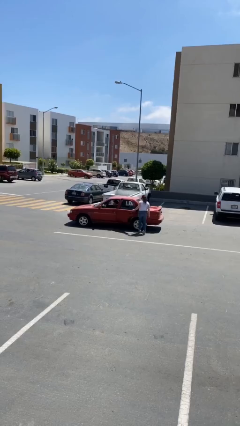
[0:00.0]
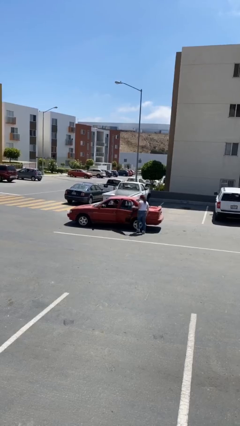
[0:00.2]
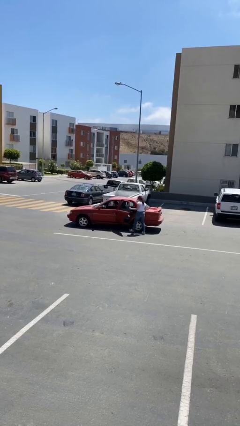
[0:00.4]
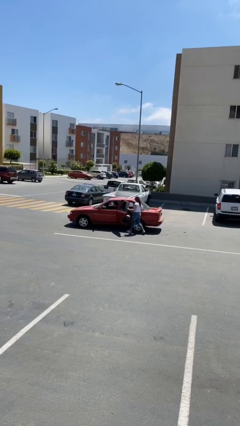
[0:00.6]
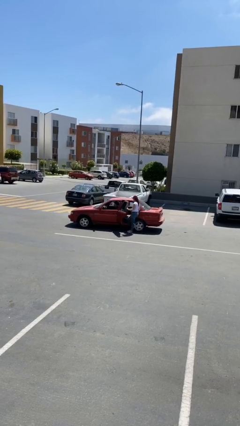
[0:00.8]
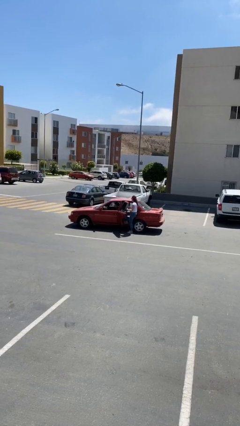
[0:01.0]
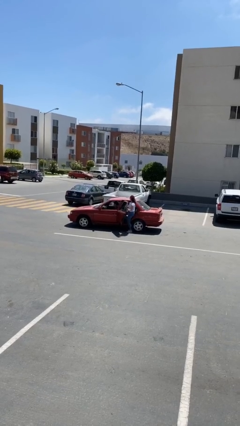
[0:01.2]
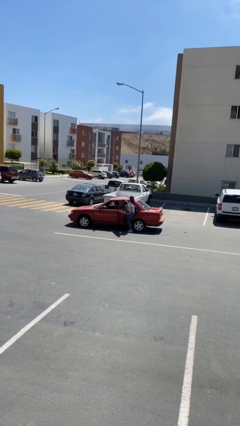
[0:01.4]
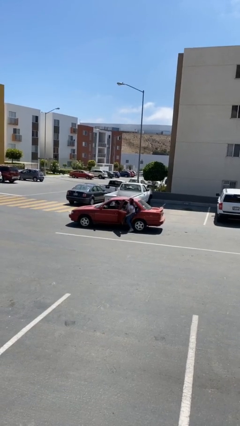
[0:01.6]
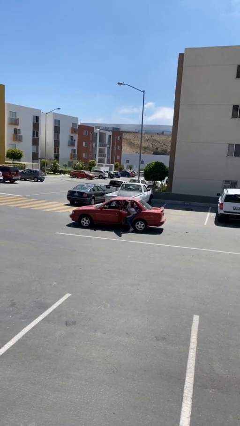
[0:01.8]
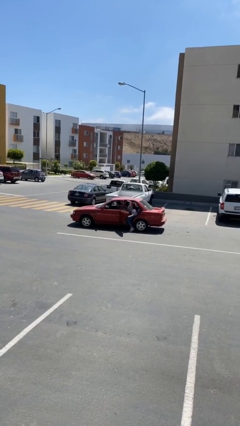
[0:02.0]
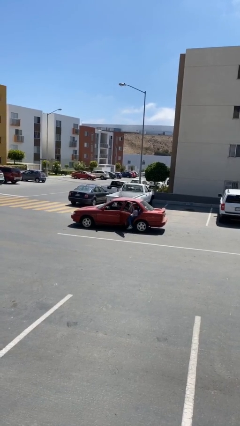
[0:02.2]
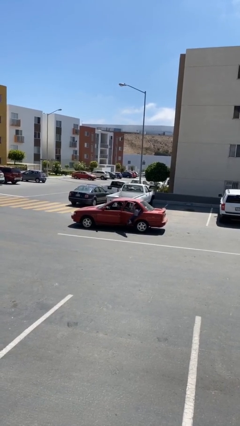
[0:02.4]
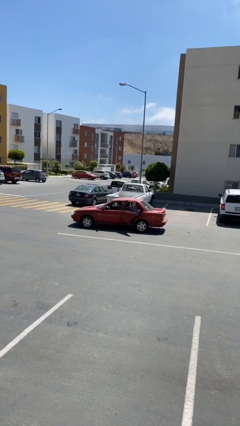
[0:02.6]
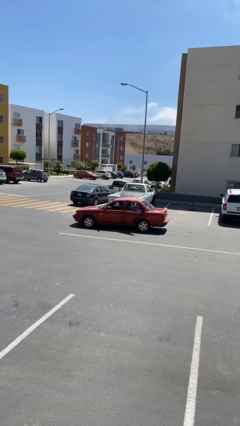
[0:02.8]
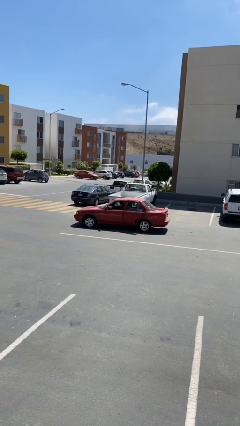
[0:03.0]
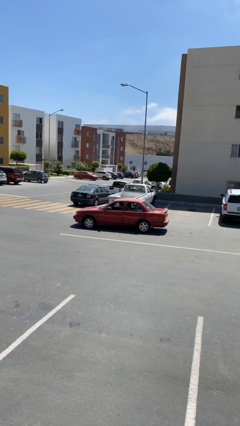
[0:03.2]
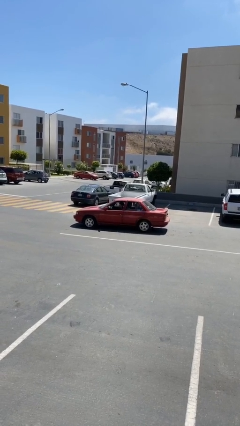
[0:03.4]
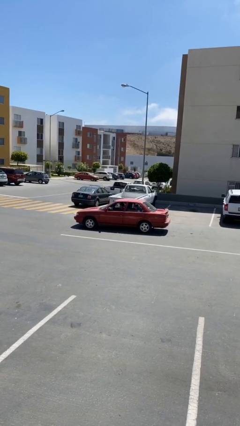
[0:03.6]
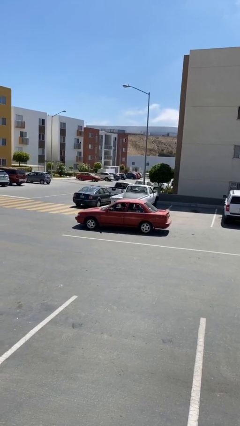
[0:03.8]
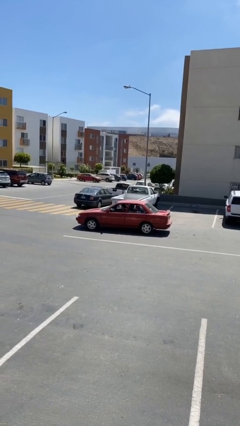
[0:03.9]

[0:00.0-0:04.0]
car picks up person

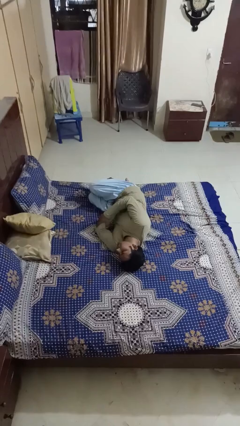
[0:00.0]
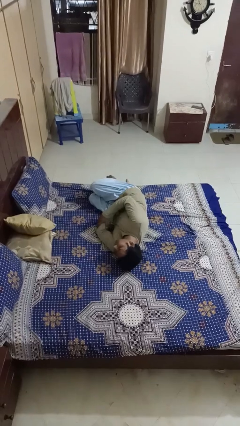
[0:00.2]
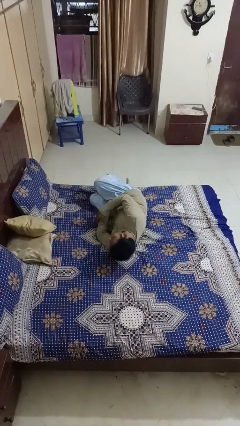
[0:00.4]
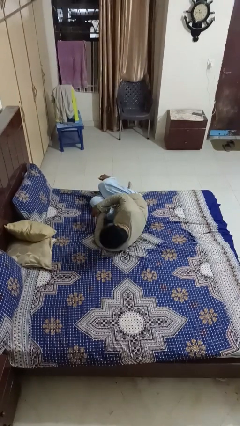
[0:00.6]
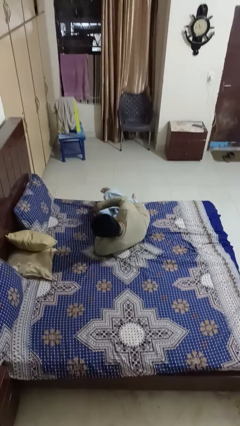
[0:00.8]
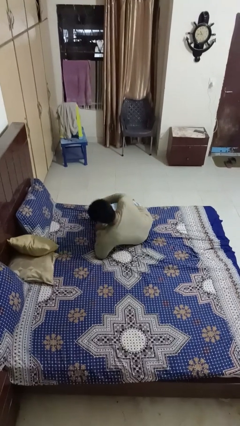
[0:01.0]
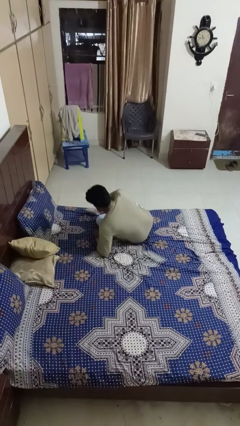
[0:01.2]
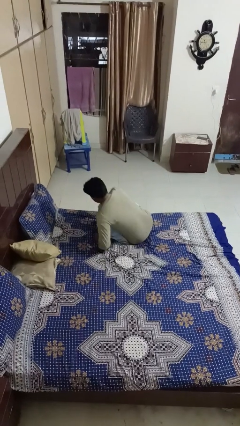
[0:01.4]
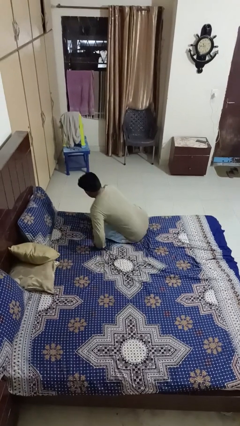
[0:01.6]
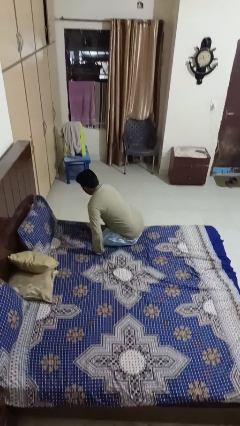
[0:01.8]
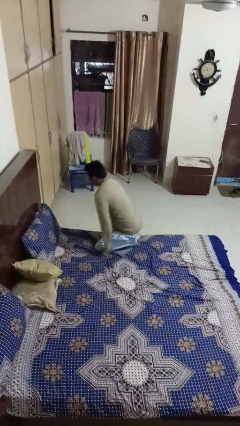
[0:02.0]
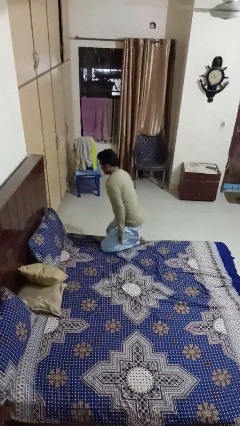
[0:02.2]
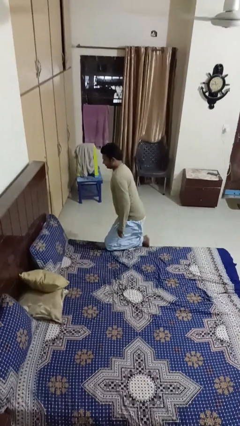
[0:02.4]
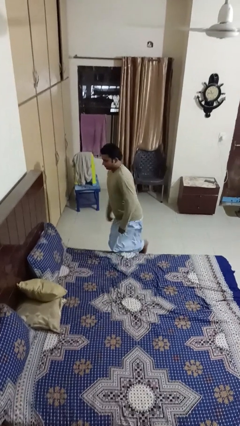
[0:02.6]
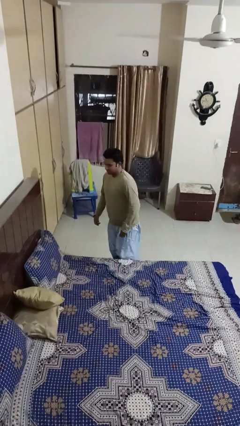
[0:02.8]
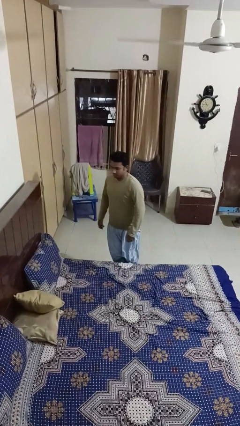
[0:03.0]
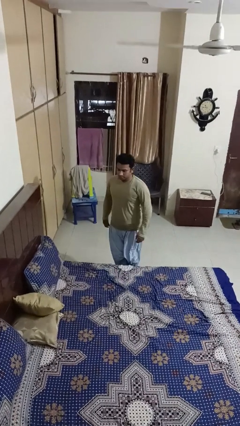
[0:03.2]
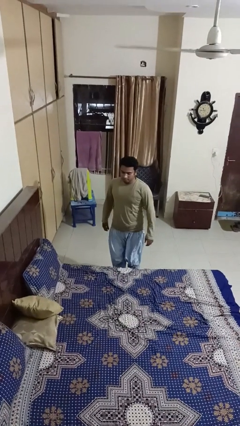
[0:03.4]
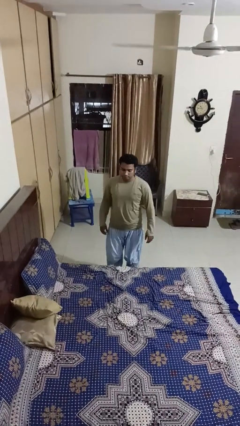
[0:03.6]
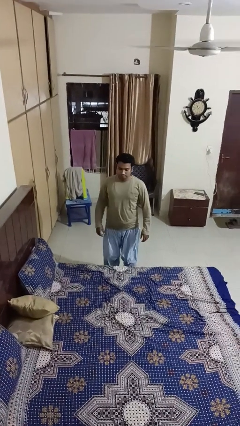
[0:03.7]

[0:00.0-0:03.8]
person stands up

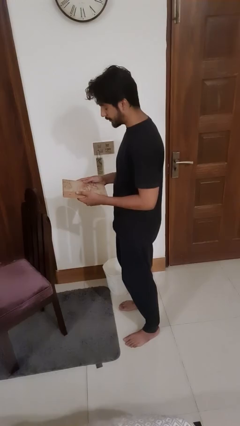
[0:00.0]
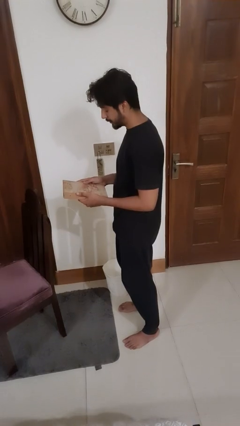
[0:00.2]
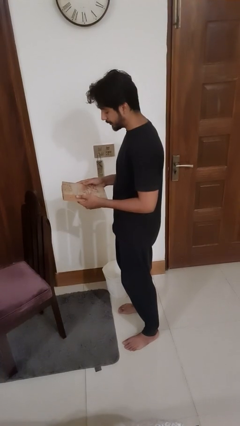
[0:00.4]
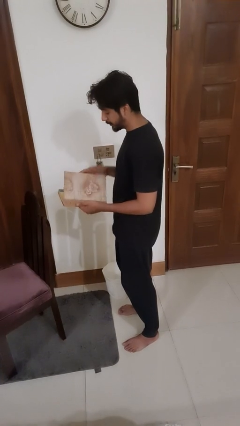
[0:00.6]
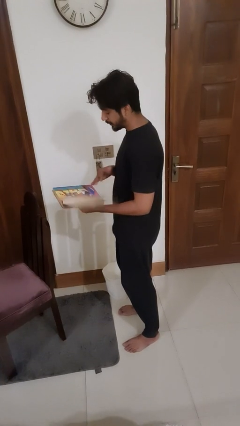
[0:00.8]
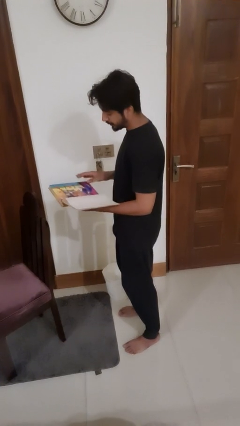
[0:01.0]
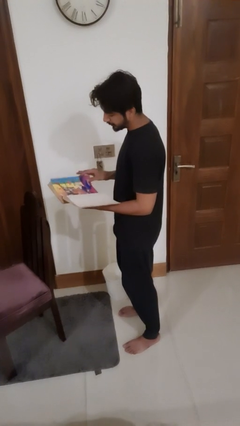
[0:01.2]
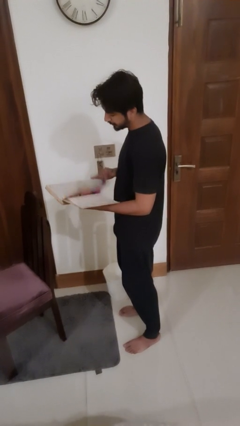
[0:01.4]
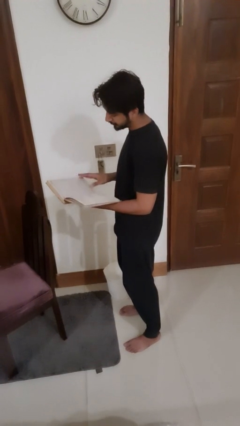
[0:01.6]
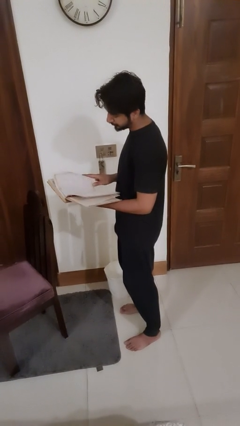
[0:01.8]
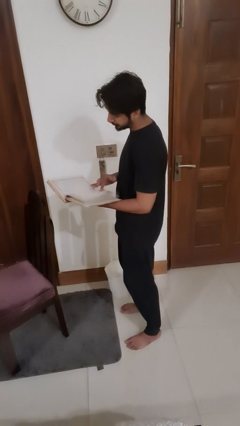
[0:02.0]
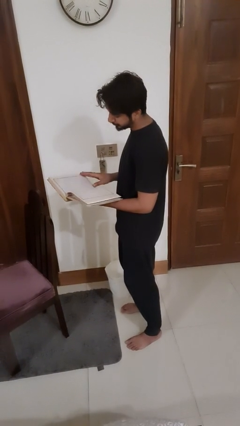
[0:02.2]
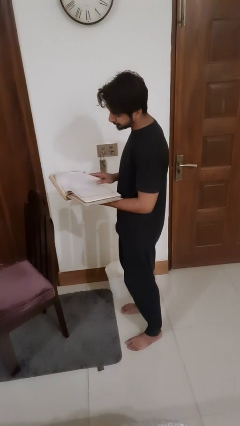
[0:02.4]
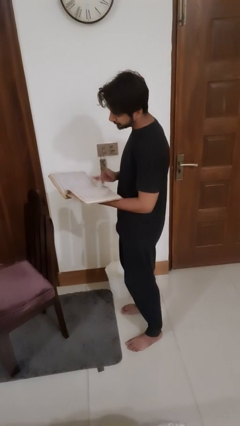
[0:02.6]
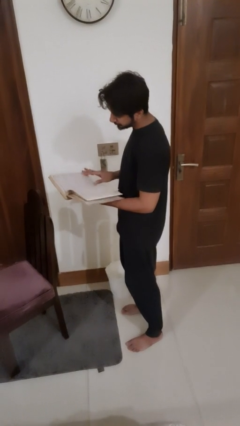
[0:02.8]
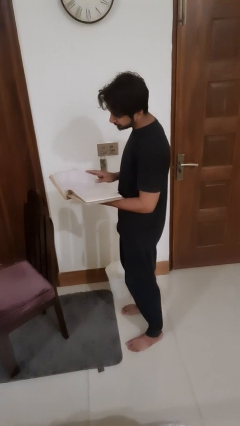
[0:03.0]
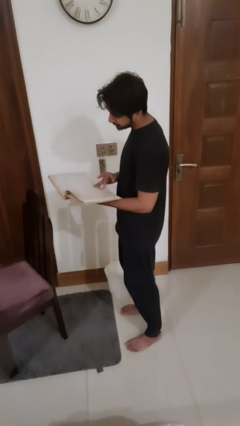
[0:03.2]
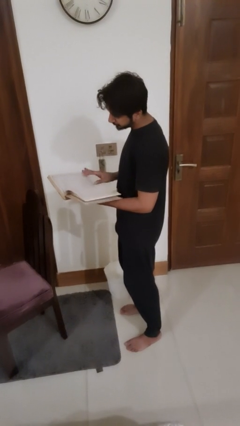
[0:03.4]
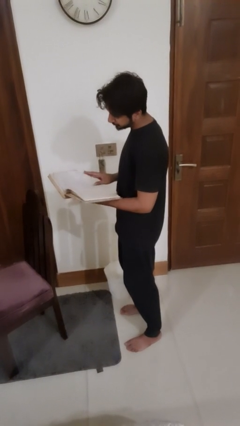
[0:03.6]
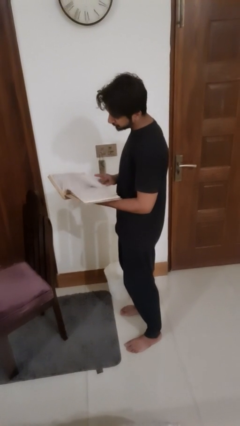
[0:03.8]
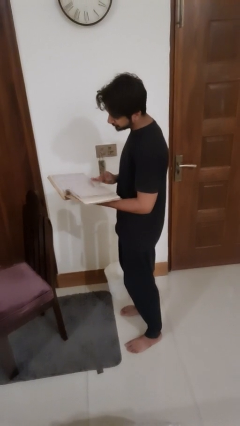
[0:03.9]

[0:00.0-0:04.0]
person reads book

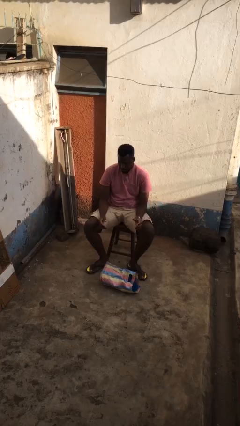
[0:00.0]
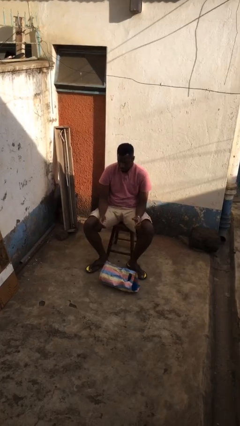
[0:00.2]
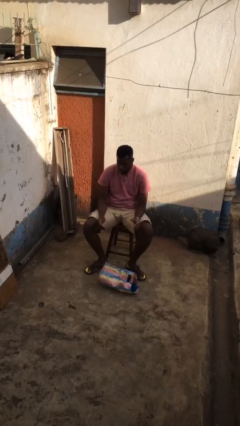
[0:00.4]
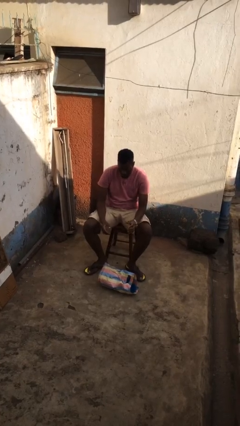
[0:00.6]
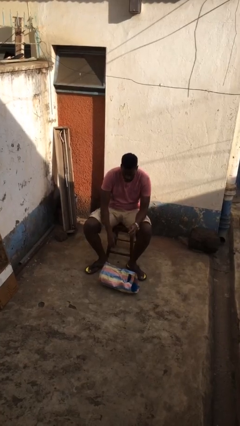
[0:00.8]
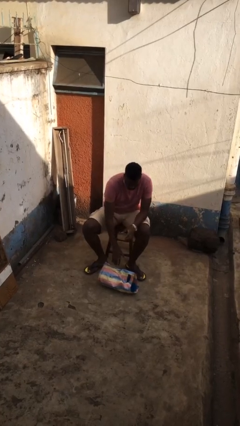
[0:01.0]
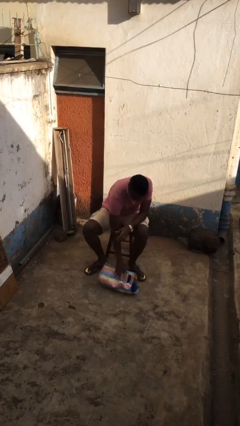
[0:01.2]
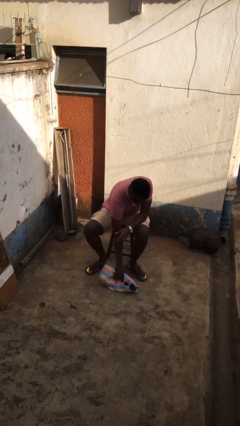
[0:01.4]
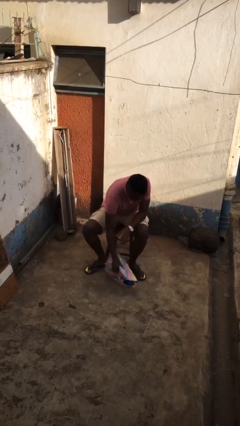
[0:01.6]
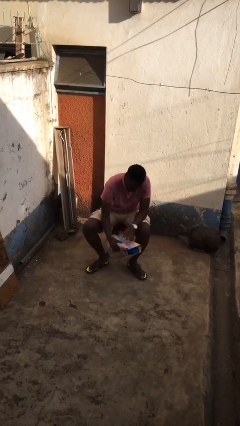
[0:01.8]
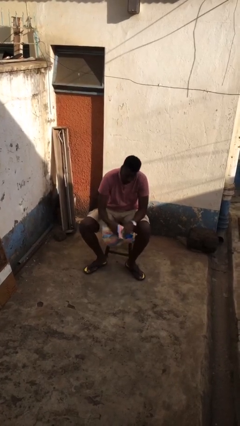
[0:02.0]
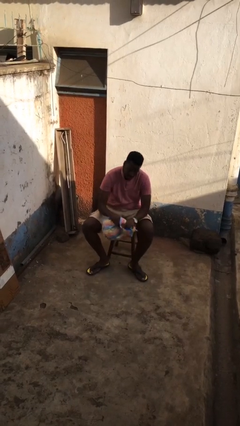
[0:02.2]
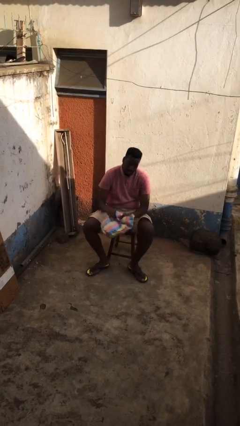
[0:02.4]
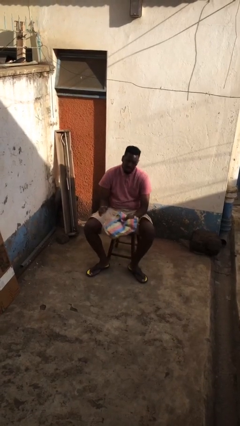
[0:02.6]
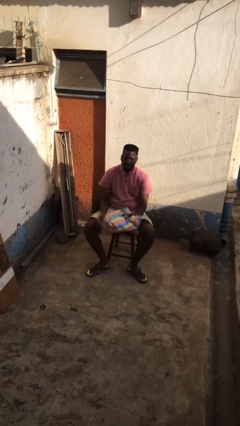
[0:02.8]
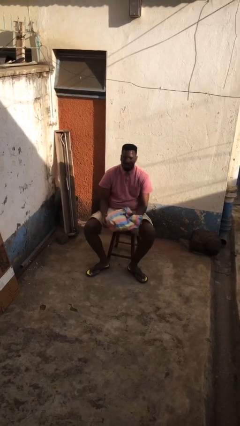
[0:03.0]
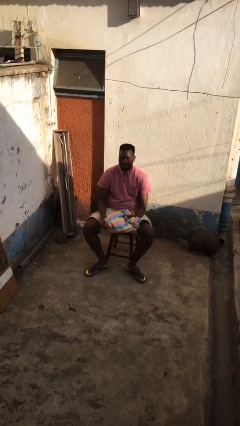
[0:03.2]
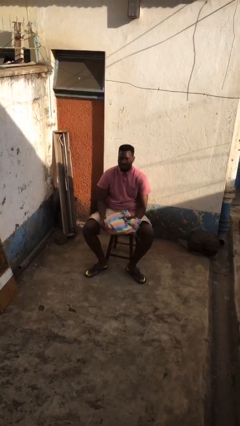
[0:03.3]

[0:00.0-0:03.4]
person picks up object from floor

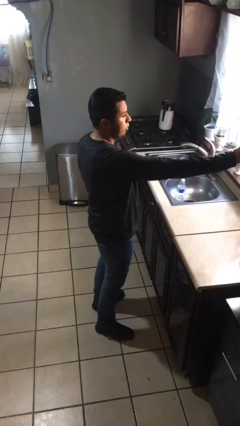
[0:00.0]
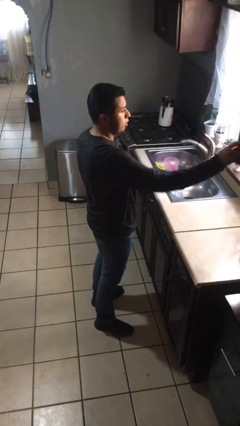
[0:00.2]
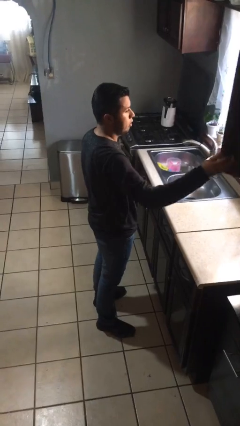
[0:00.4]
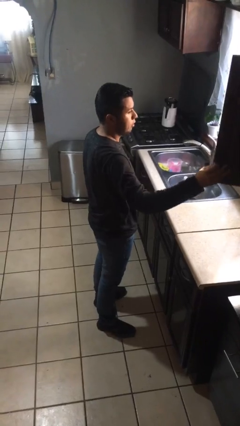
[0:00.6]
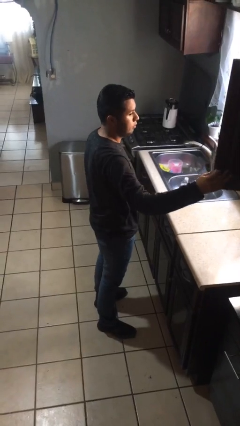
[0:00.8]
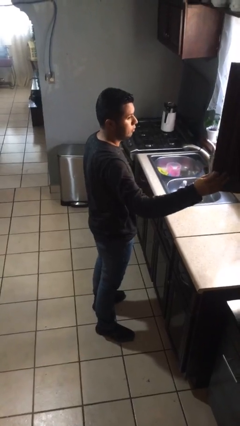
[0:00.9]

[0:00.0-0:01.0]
person opens cabinet

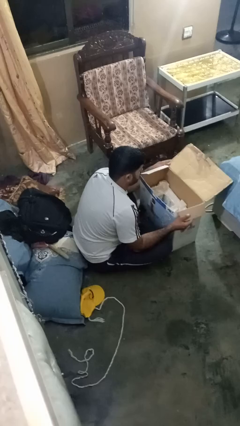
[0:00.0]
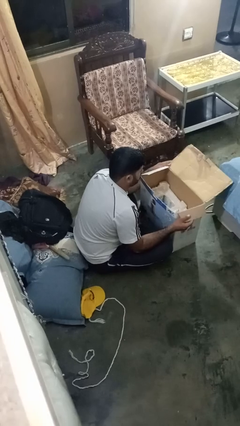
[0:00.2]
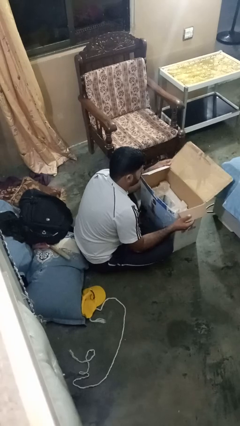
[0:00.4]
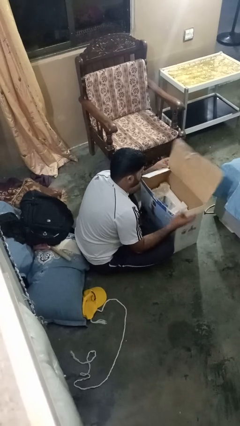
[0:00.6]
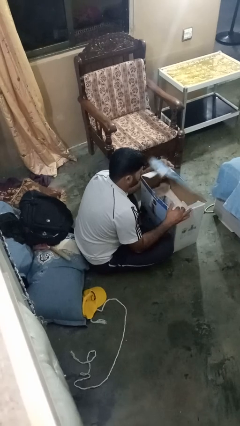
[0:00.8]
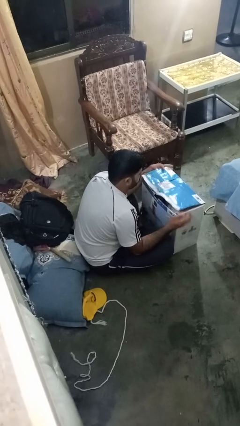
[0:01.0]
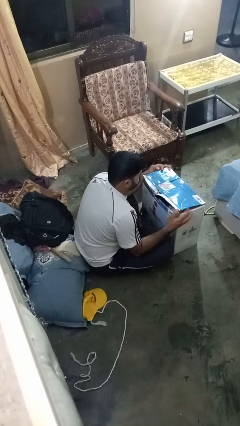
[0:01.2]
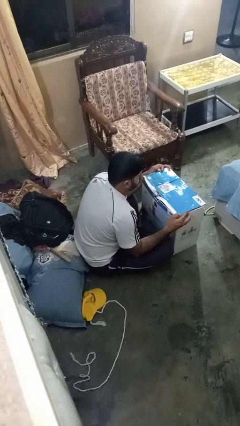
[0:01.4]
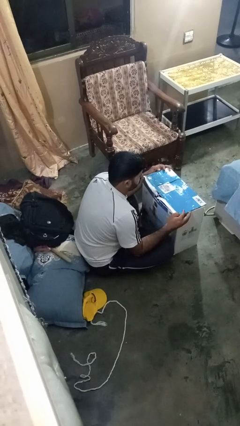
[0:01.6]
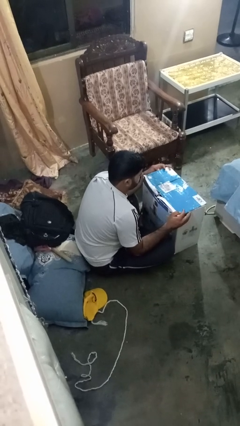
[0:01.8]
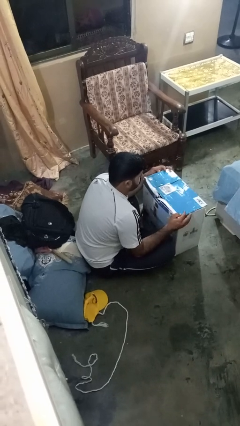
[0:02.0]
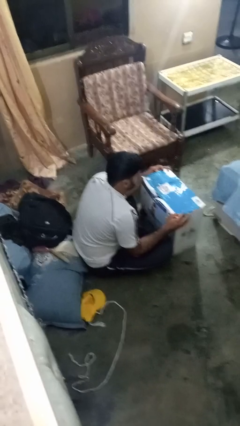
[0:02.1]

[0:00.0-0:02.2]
person closes box
